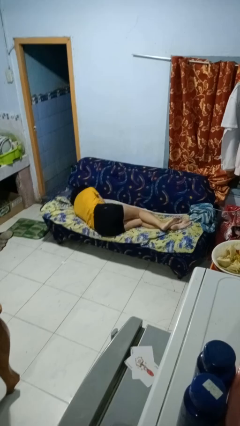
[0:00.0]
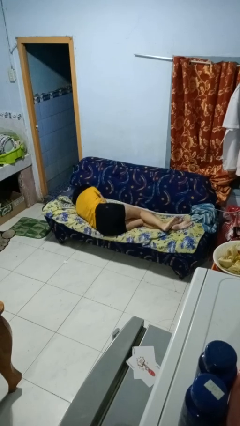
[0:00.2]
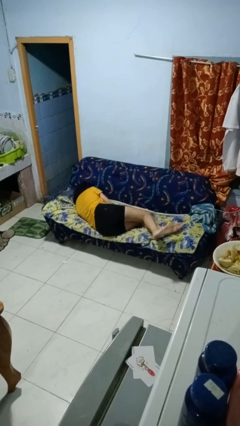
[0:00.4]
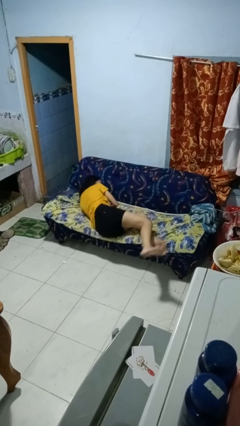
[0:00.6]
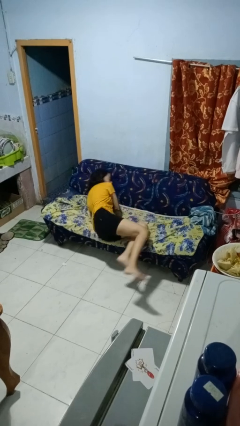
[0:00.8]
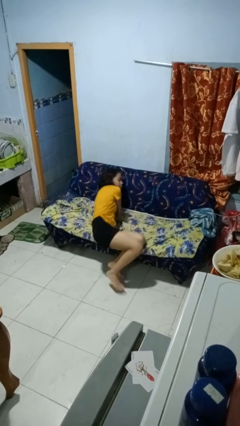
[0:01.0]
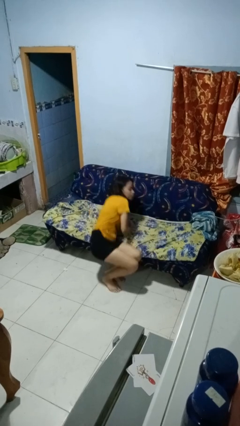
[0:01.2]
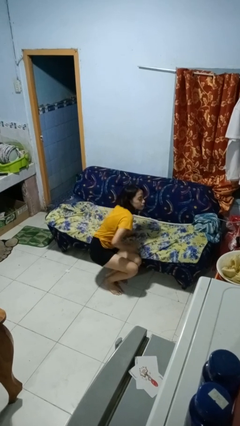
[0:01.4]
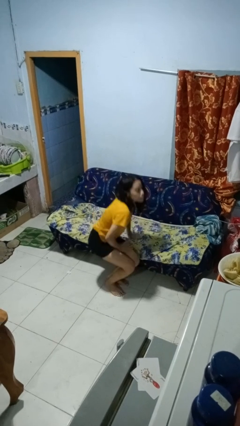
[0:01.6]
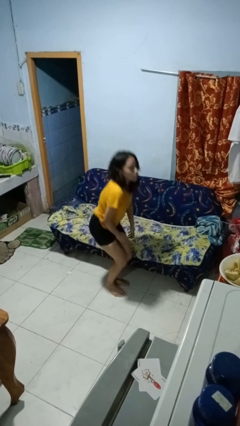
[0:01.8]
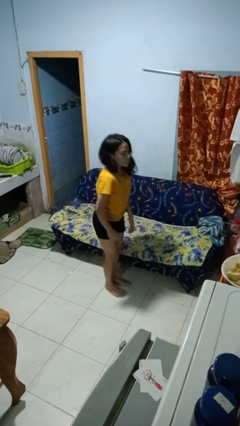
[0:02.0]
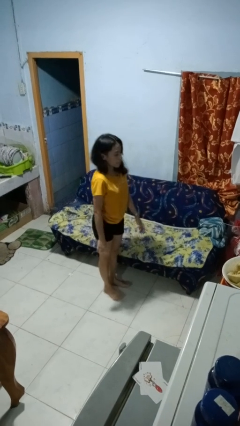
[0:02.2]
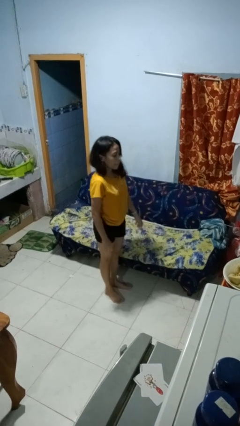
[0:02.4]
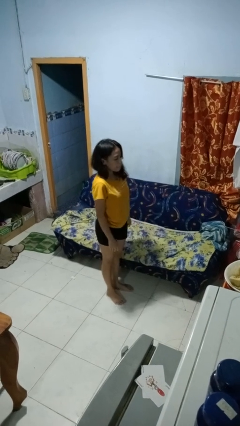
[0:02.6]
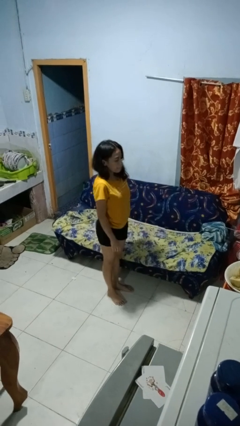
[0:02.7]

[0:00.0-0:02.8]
person stands up

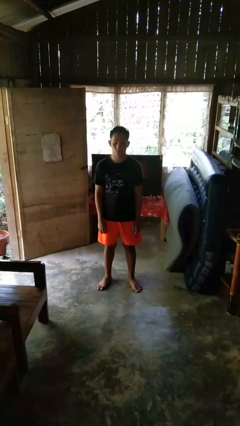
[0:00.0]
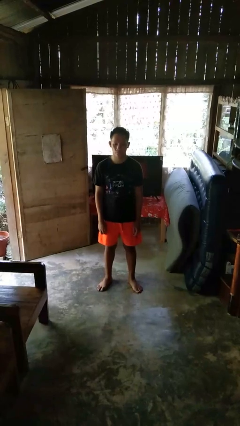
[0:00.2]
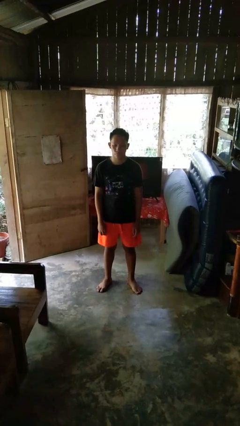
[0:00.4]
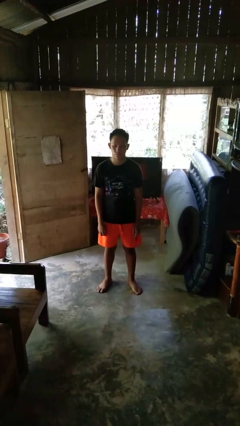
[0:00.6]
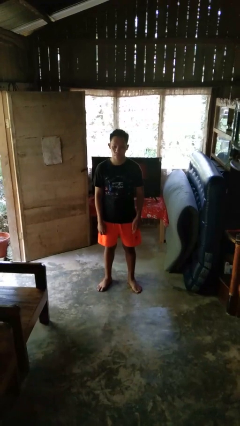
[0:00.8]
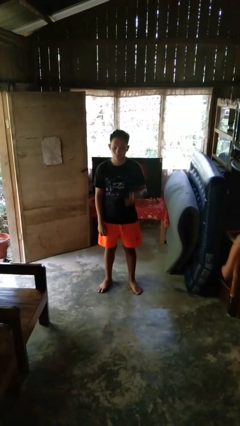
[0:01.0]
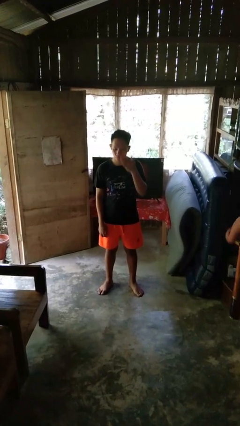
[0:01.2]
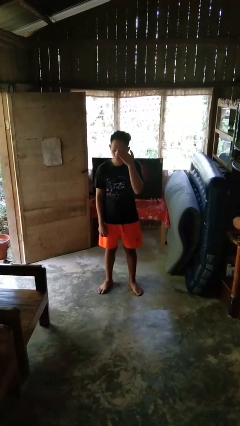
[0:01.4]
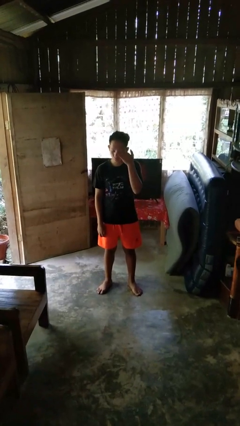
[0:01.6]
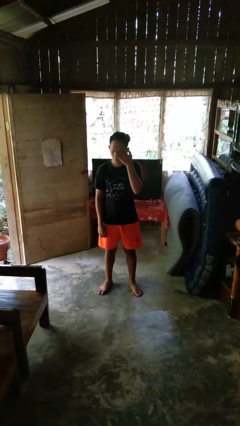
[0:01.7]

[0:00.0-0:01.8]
person rubs eyes

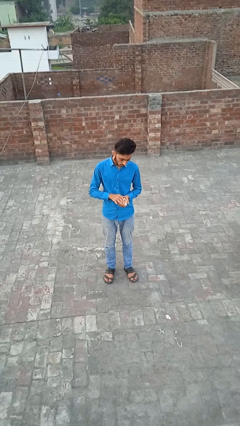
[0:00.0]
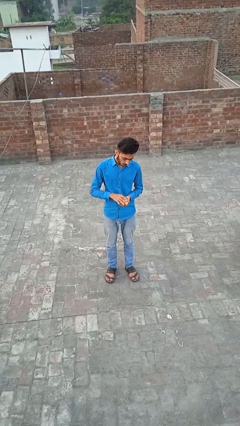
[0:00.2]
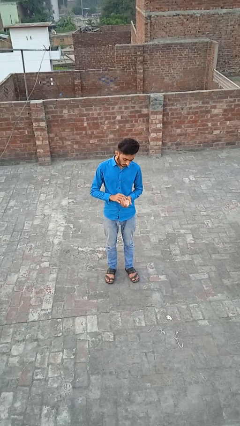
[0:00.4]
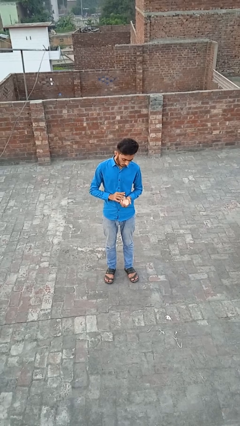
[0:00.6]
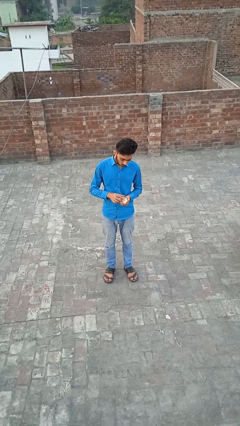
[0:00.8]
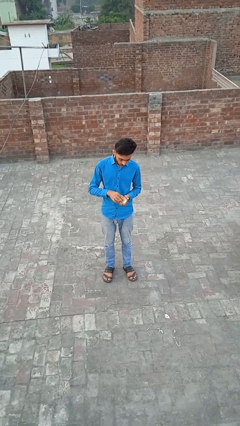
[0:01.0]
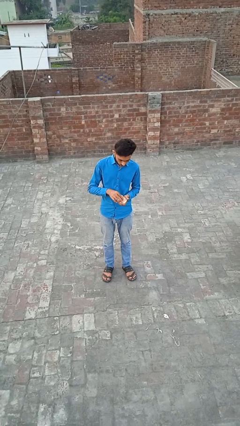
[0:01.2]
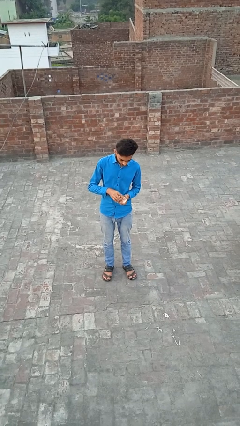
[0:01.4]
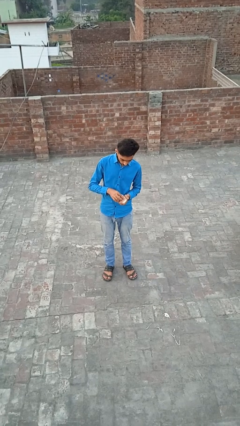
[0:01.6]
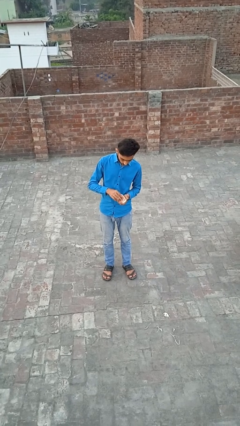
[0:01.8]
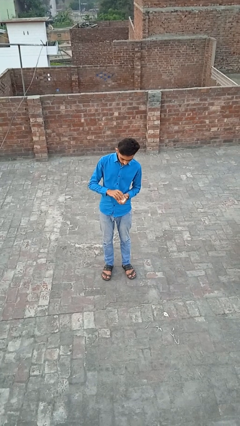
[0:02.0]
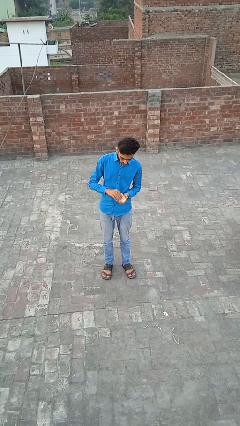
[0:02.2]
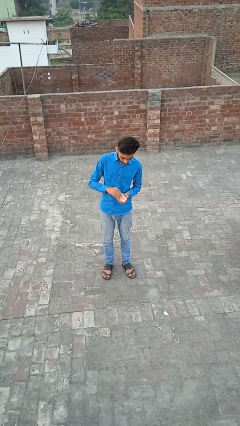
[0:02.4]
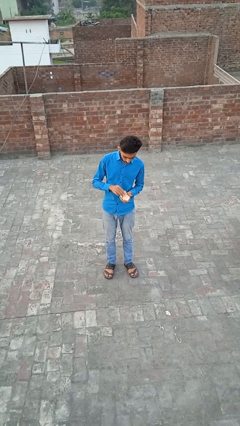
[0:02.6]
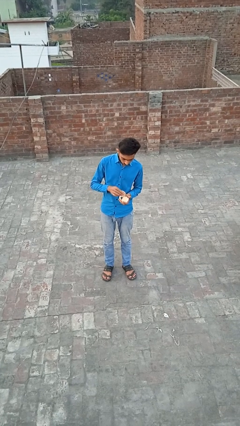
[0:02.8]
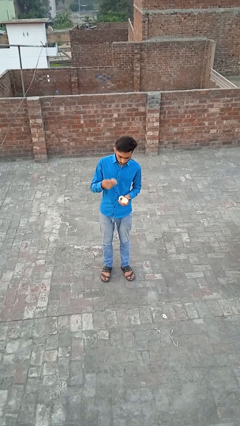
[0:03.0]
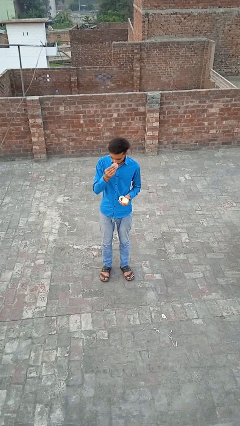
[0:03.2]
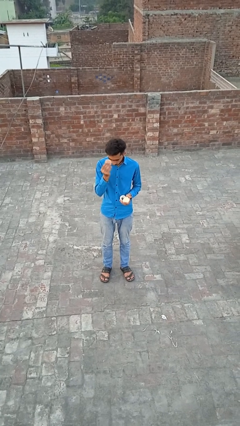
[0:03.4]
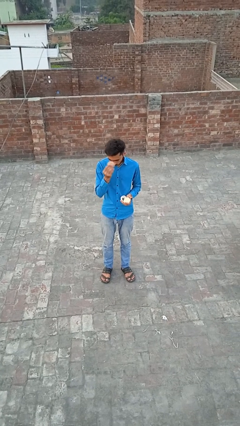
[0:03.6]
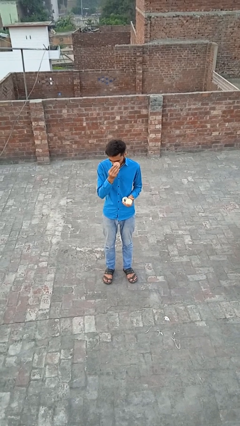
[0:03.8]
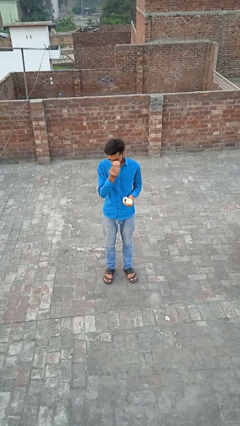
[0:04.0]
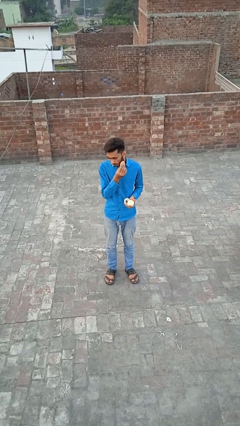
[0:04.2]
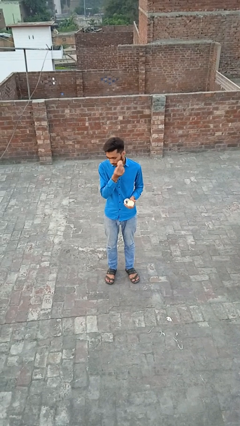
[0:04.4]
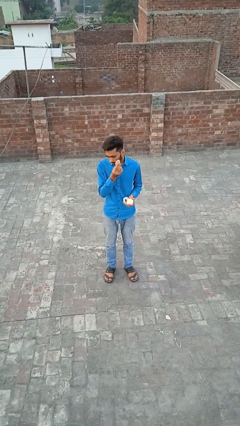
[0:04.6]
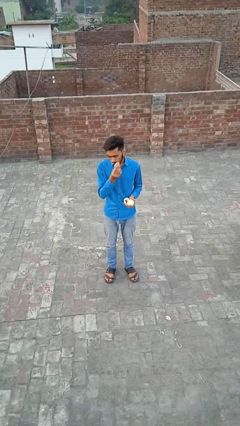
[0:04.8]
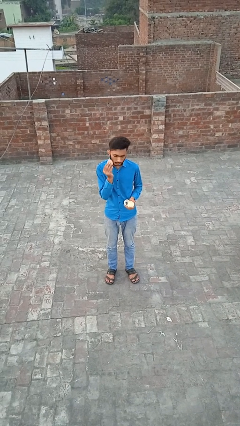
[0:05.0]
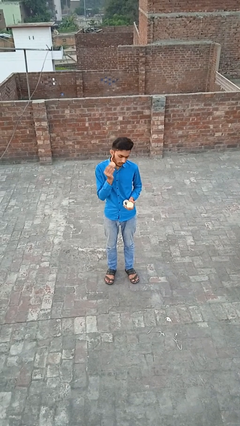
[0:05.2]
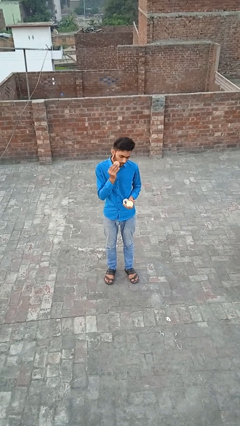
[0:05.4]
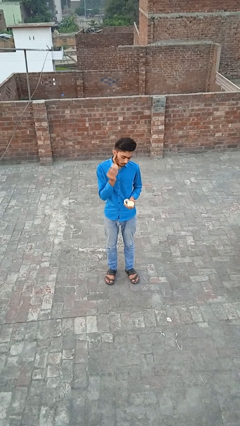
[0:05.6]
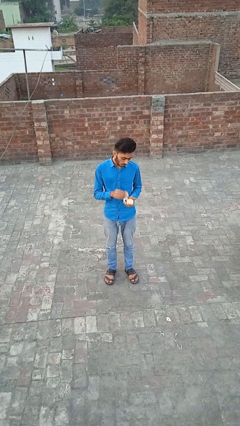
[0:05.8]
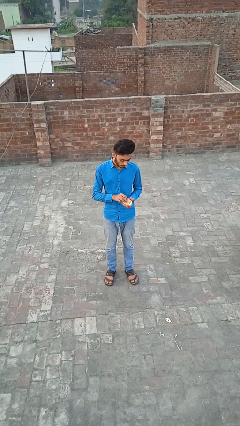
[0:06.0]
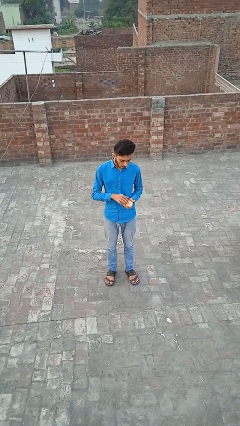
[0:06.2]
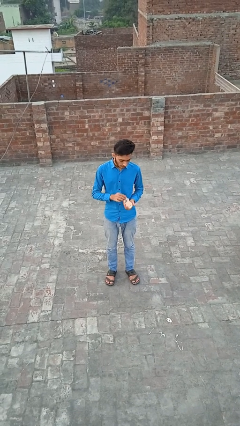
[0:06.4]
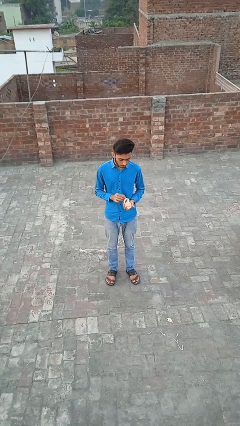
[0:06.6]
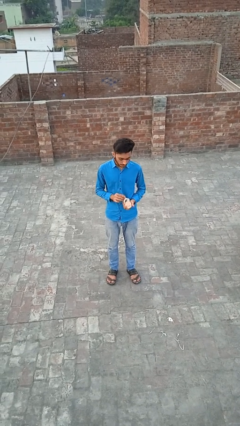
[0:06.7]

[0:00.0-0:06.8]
person applies foundation makeup

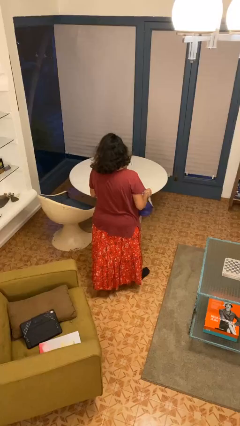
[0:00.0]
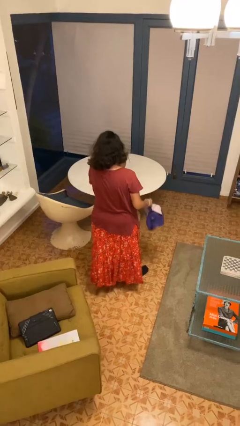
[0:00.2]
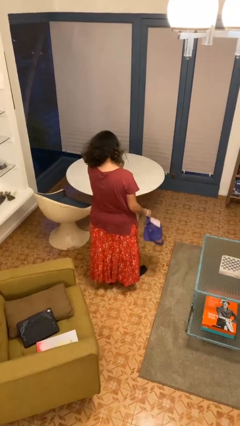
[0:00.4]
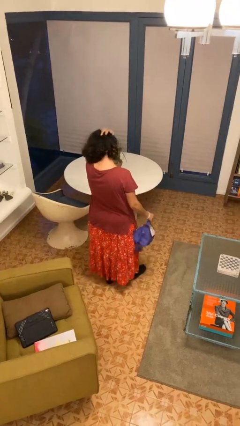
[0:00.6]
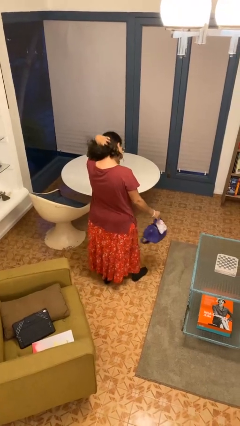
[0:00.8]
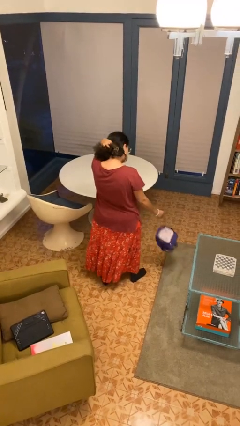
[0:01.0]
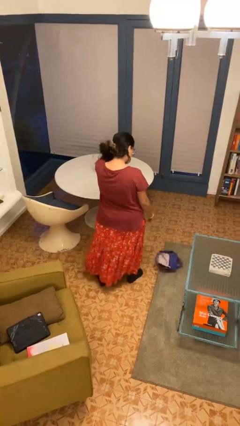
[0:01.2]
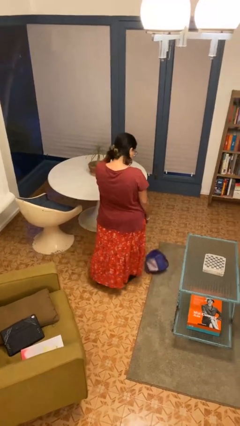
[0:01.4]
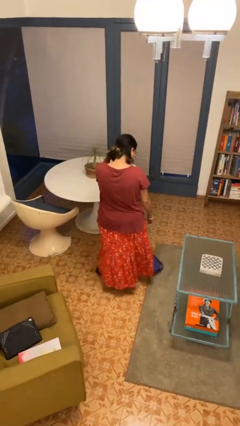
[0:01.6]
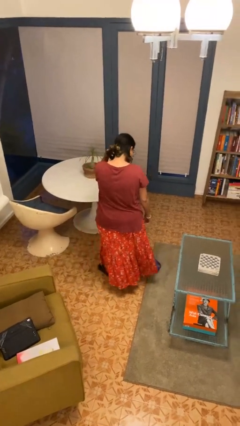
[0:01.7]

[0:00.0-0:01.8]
person drops object

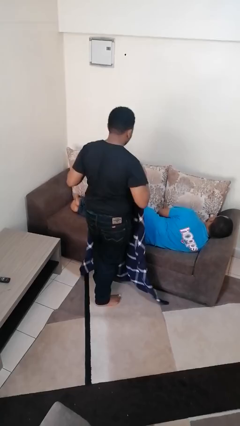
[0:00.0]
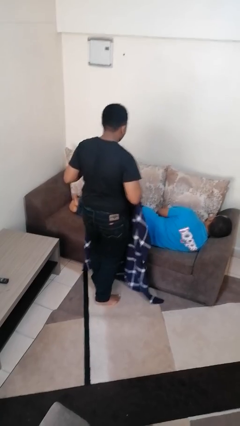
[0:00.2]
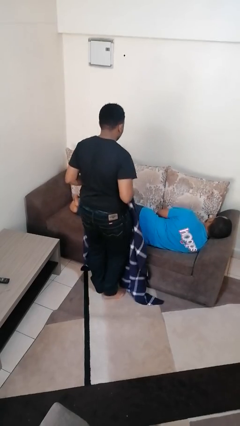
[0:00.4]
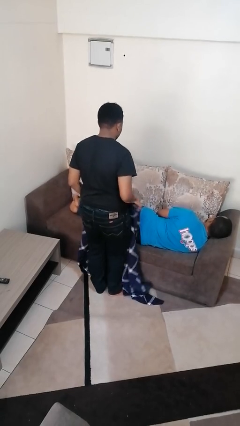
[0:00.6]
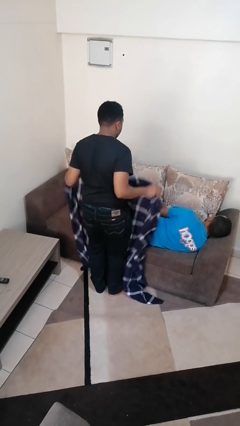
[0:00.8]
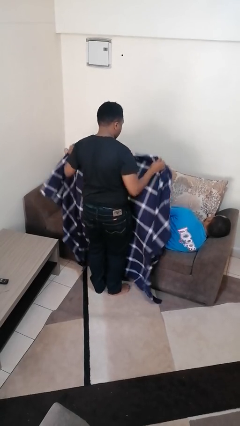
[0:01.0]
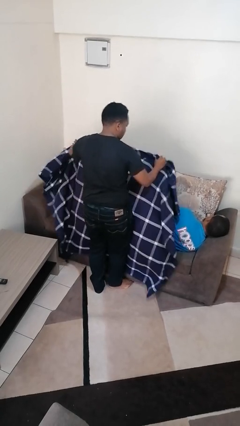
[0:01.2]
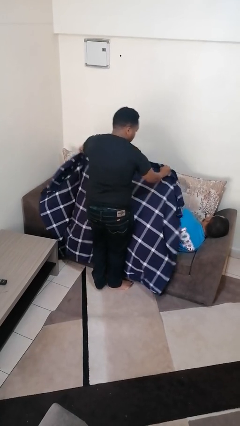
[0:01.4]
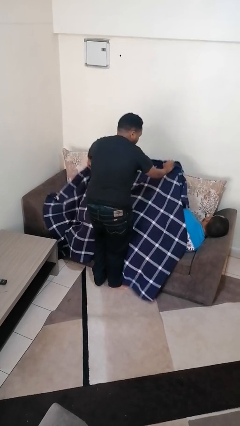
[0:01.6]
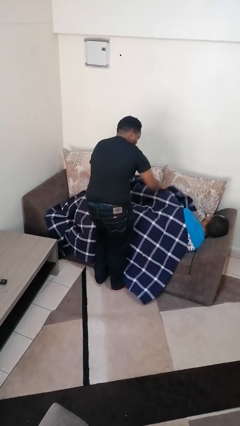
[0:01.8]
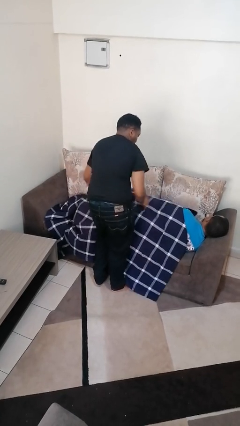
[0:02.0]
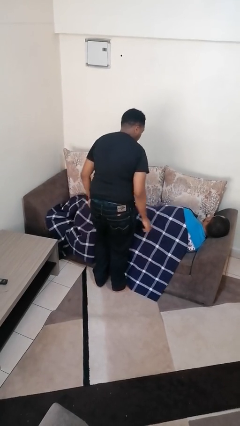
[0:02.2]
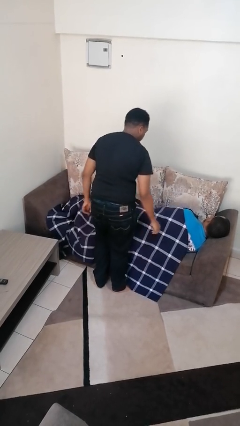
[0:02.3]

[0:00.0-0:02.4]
person covers friend with blanket

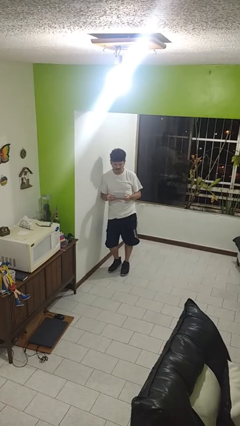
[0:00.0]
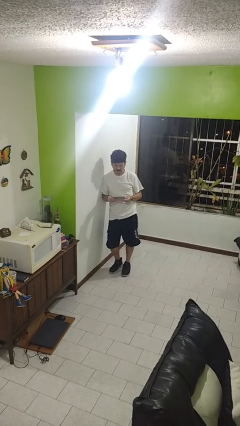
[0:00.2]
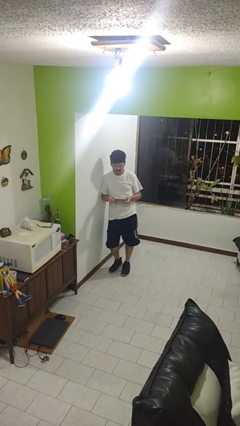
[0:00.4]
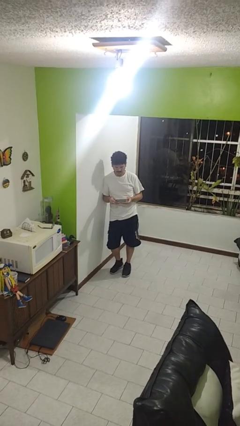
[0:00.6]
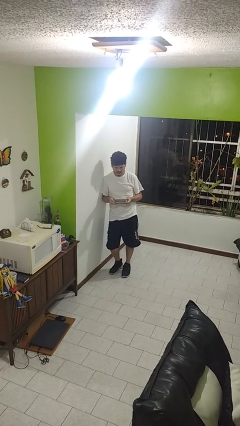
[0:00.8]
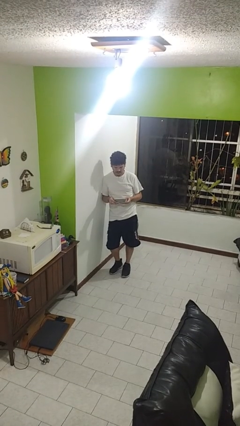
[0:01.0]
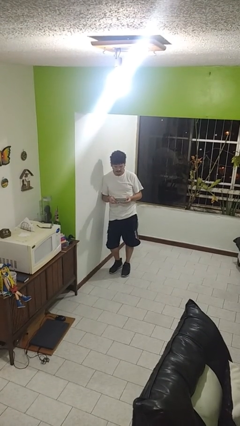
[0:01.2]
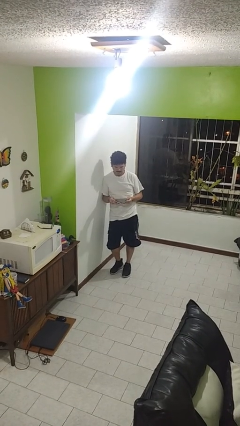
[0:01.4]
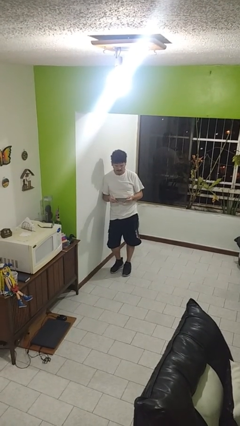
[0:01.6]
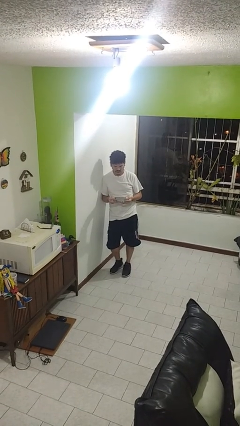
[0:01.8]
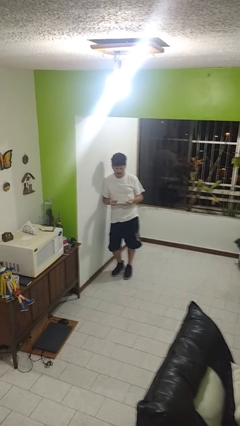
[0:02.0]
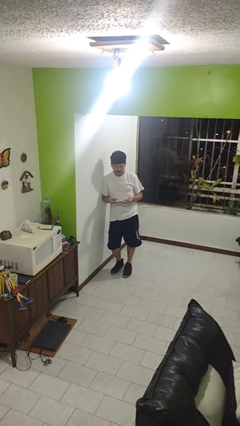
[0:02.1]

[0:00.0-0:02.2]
person interacts with handheld game
